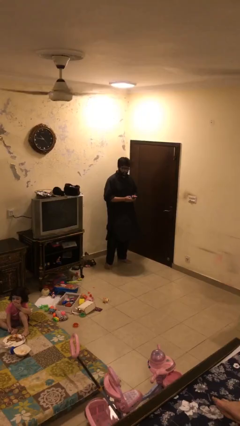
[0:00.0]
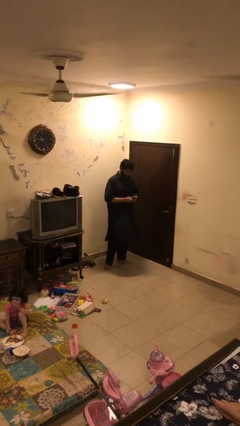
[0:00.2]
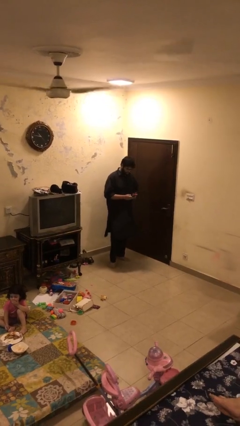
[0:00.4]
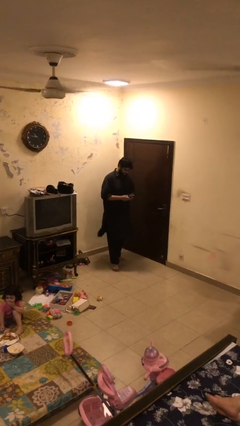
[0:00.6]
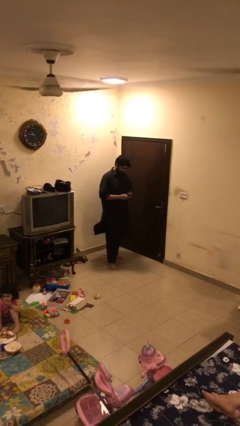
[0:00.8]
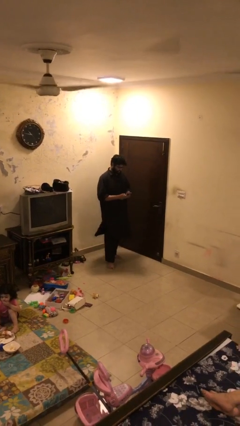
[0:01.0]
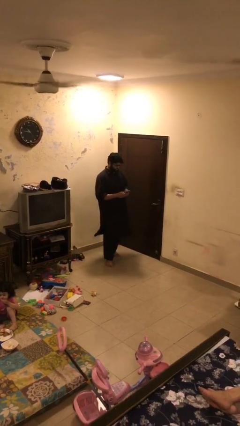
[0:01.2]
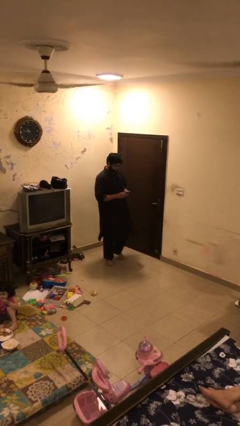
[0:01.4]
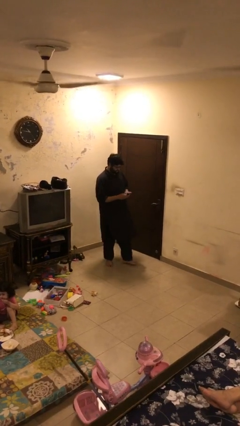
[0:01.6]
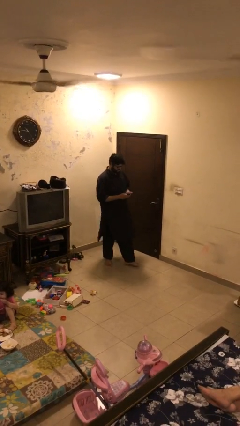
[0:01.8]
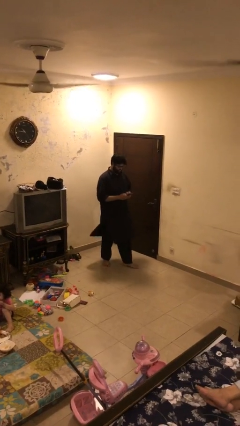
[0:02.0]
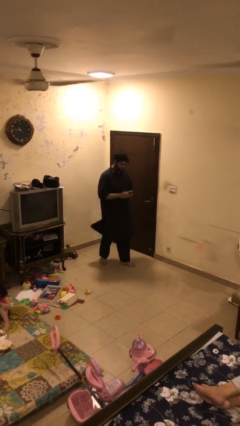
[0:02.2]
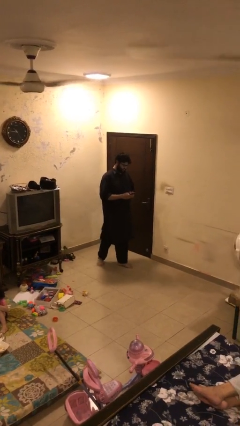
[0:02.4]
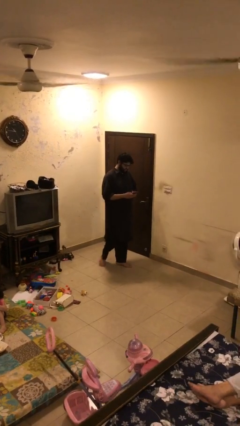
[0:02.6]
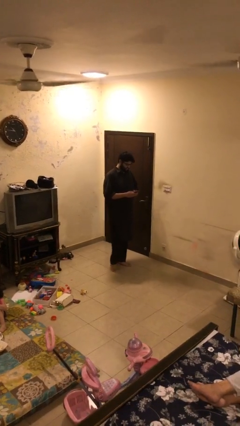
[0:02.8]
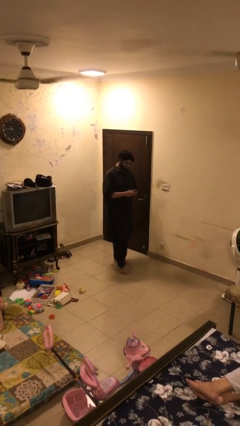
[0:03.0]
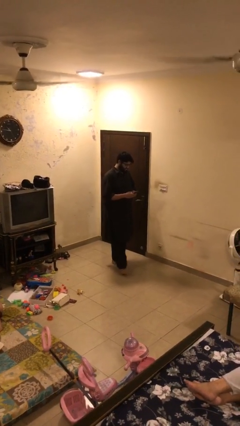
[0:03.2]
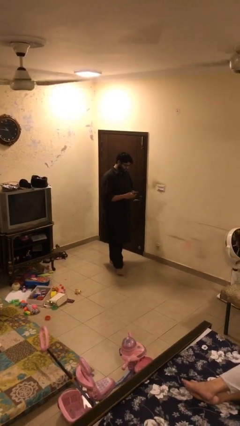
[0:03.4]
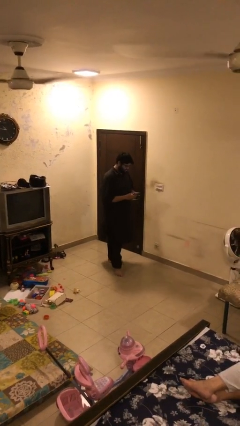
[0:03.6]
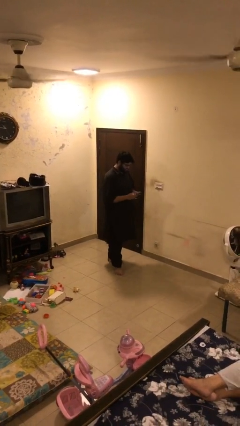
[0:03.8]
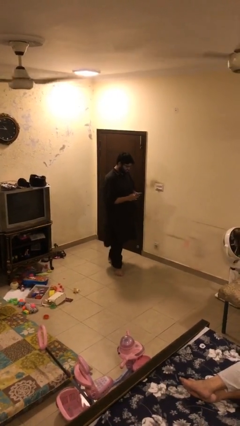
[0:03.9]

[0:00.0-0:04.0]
person texts on phone

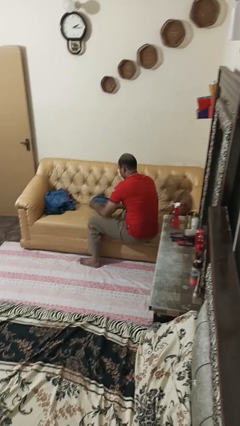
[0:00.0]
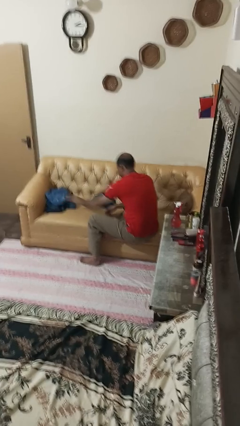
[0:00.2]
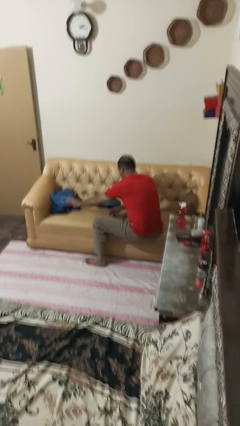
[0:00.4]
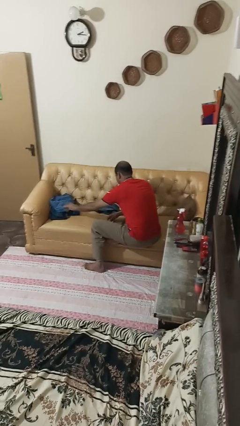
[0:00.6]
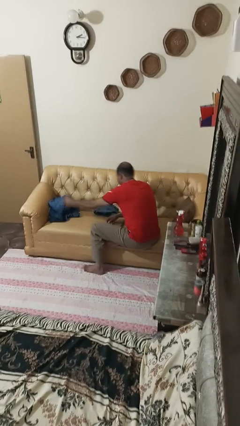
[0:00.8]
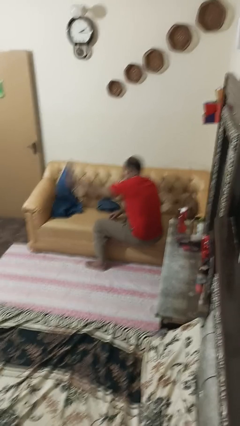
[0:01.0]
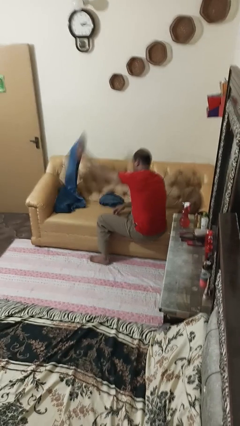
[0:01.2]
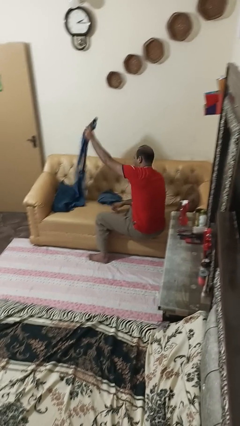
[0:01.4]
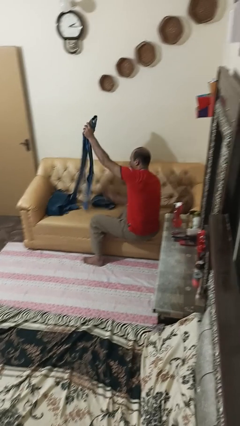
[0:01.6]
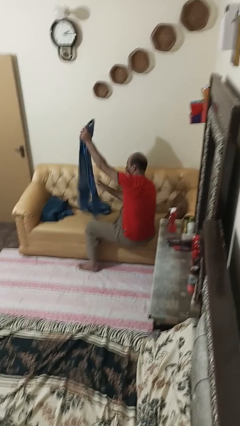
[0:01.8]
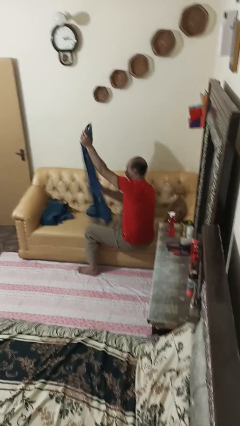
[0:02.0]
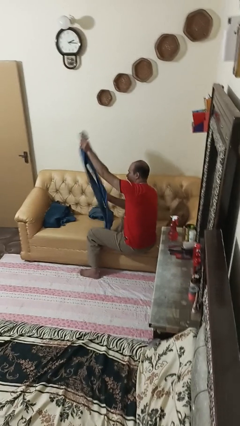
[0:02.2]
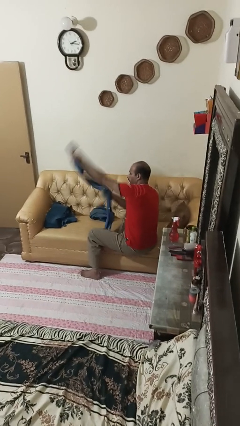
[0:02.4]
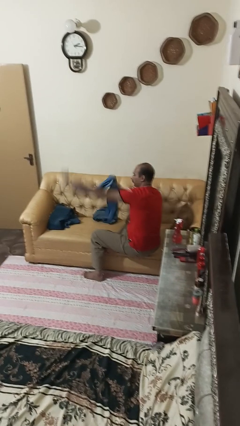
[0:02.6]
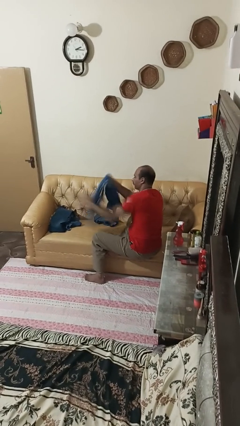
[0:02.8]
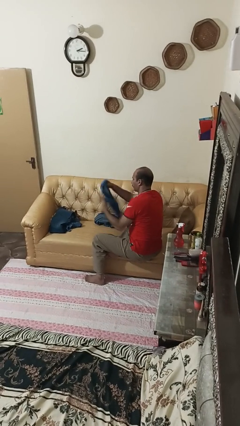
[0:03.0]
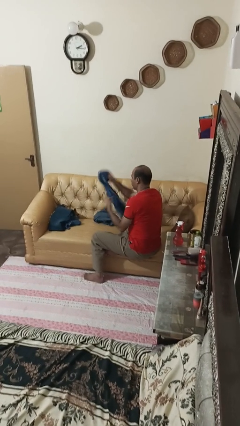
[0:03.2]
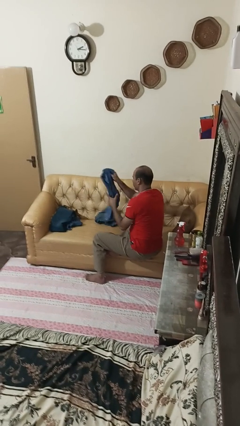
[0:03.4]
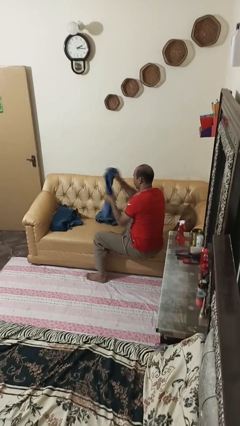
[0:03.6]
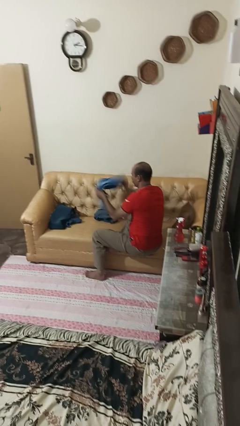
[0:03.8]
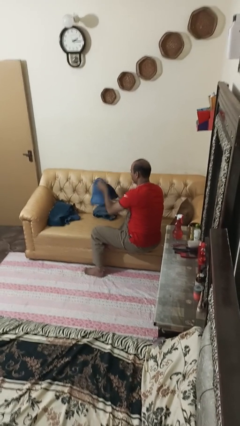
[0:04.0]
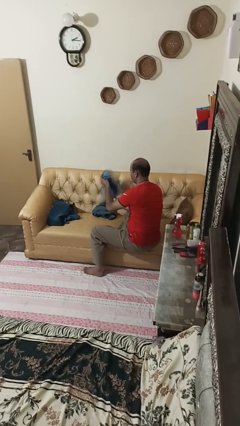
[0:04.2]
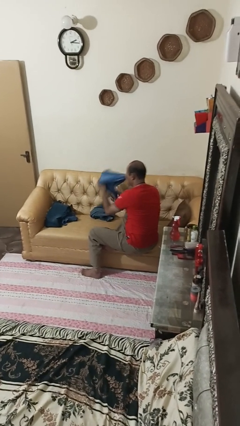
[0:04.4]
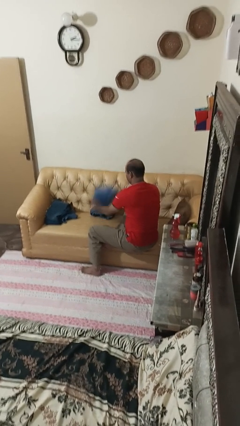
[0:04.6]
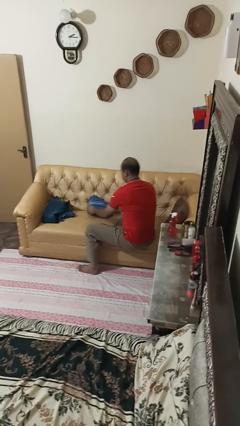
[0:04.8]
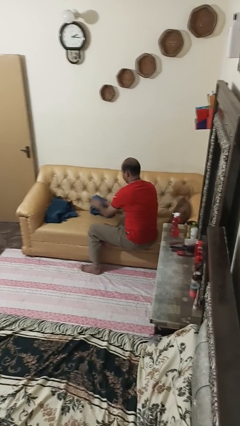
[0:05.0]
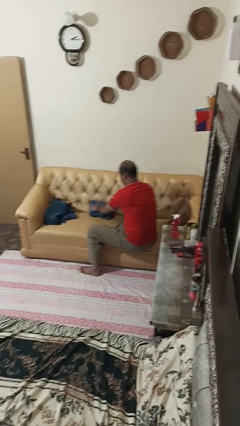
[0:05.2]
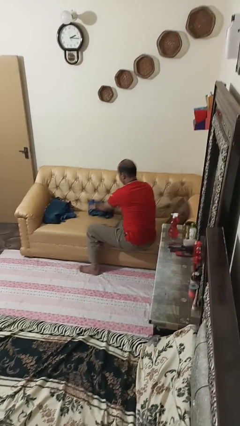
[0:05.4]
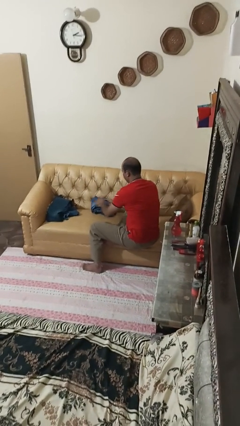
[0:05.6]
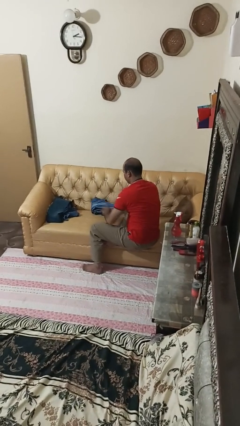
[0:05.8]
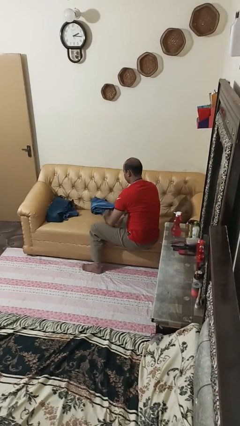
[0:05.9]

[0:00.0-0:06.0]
person folds pants

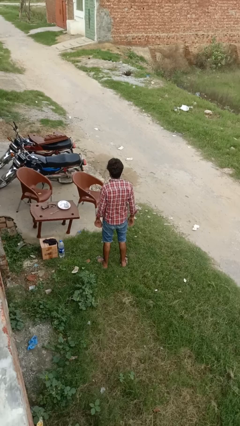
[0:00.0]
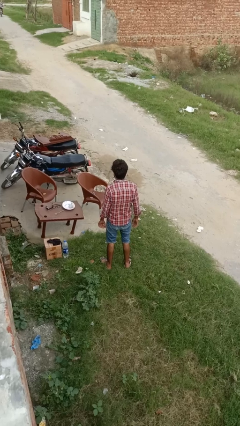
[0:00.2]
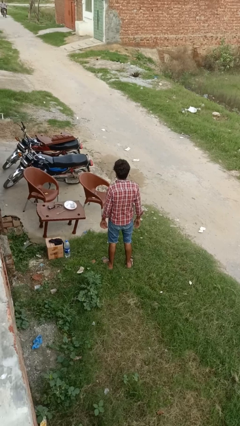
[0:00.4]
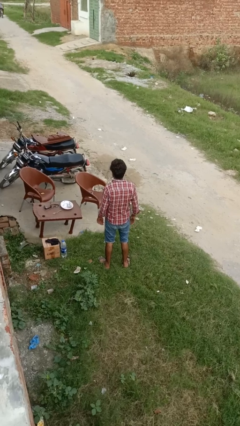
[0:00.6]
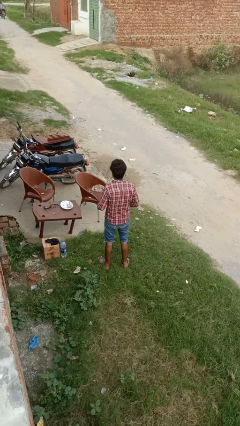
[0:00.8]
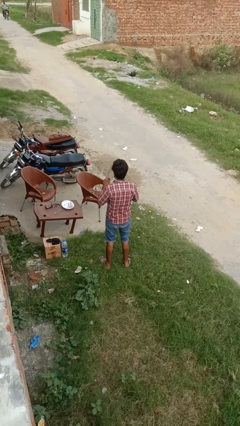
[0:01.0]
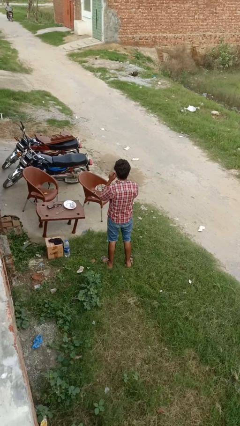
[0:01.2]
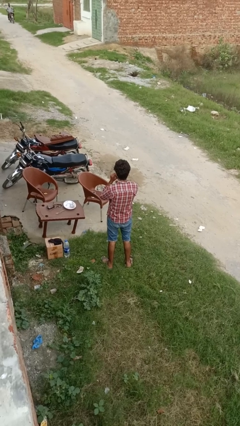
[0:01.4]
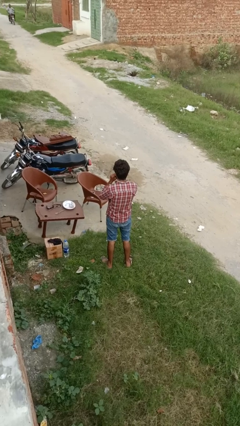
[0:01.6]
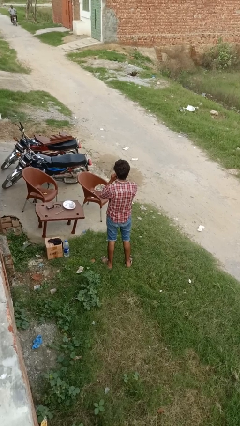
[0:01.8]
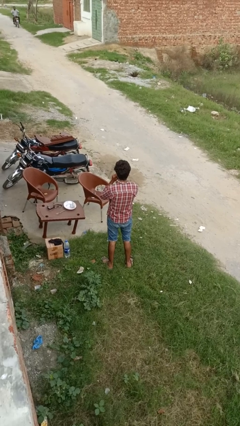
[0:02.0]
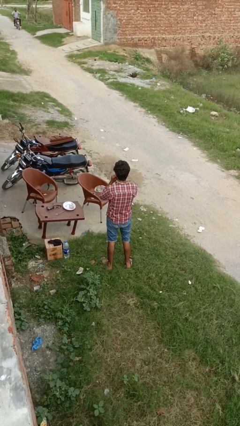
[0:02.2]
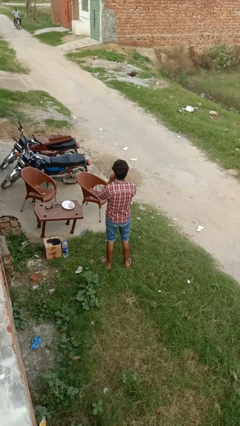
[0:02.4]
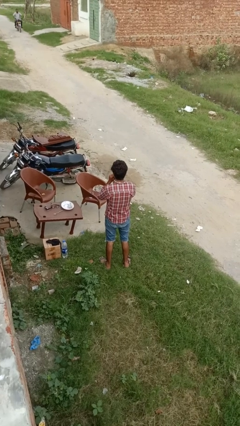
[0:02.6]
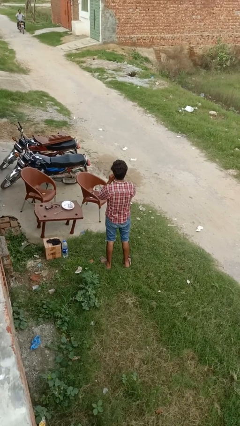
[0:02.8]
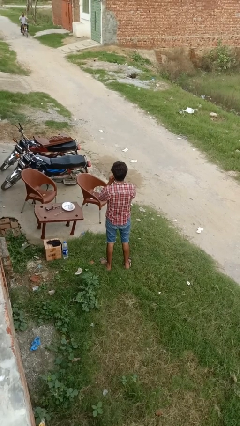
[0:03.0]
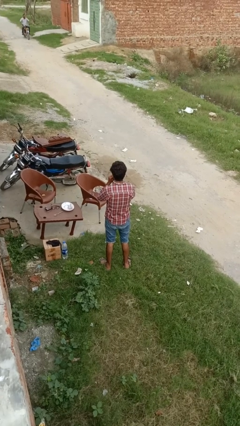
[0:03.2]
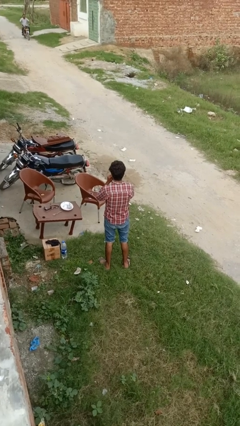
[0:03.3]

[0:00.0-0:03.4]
person flosses

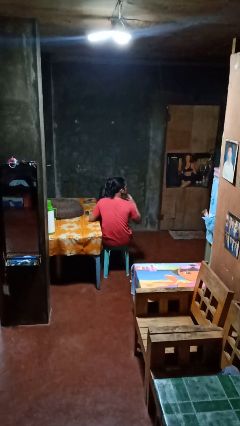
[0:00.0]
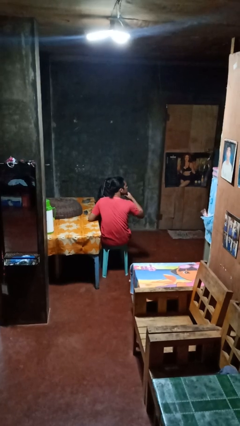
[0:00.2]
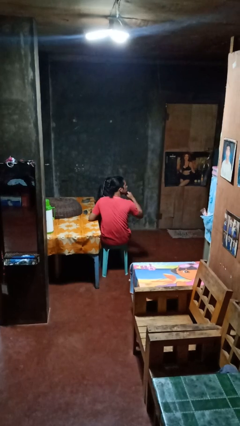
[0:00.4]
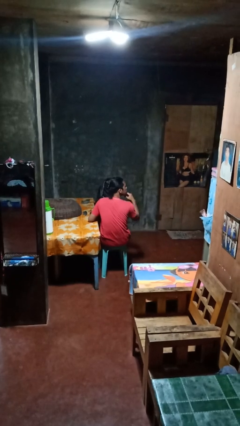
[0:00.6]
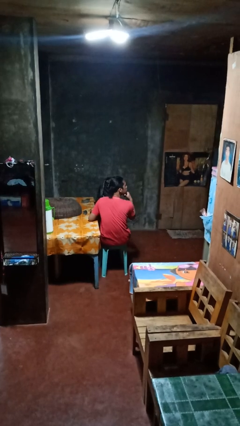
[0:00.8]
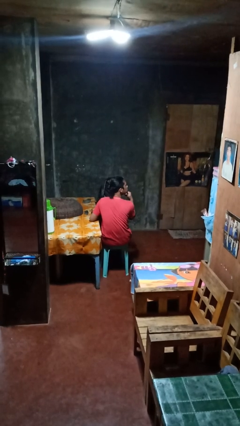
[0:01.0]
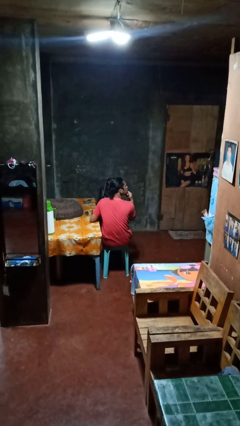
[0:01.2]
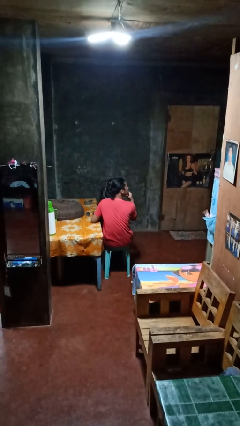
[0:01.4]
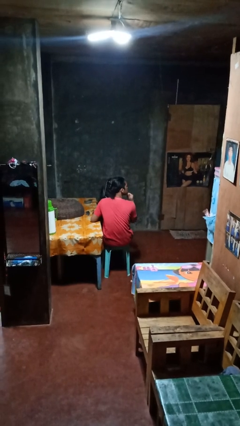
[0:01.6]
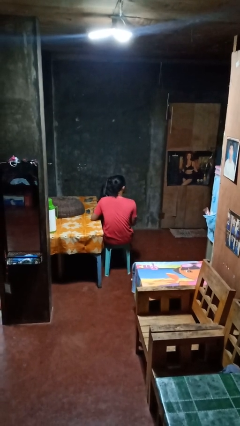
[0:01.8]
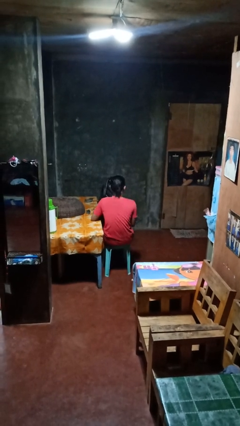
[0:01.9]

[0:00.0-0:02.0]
person strokes chin

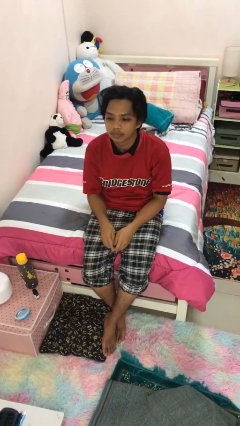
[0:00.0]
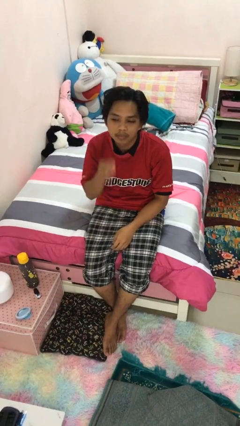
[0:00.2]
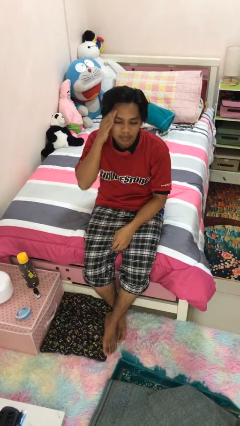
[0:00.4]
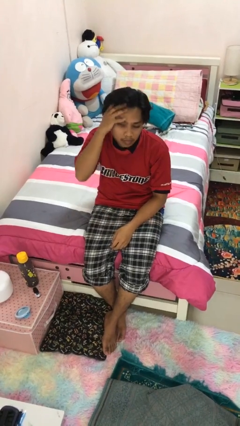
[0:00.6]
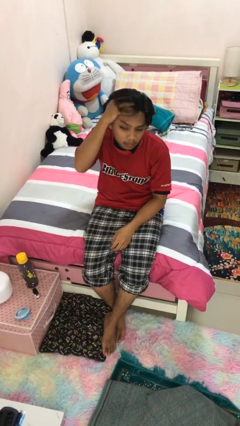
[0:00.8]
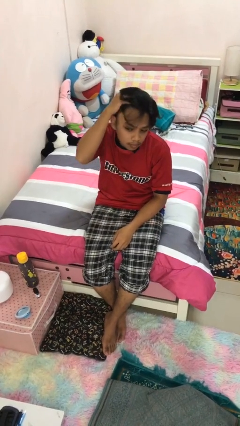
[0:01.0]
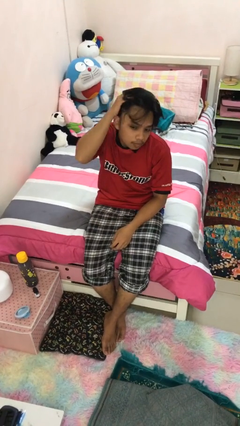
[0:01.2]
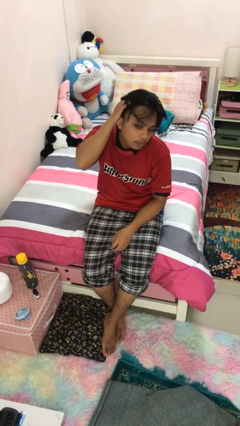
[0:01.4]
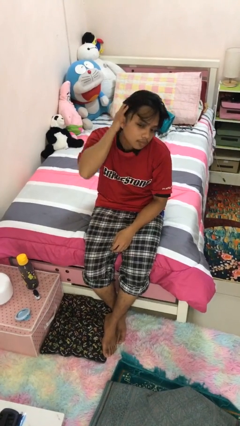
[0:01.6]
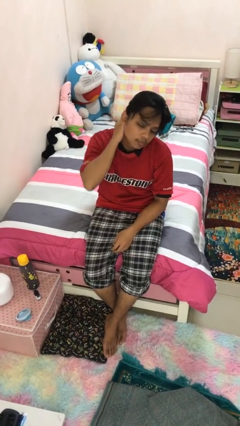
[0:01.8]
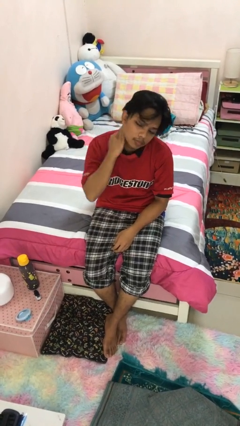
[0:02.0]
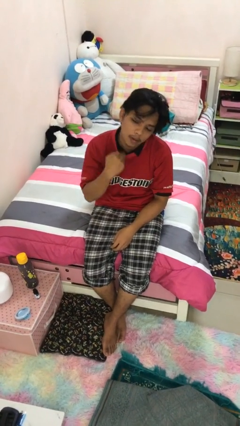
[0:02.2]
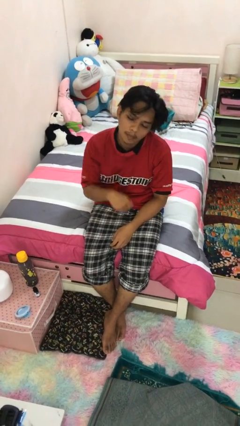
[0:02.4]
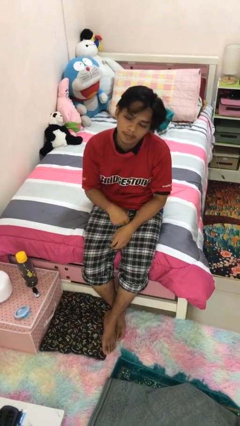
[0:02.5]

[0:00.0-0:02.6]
person strokes hair
